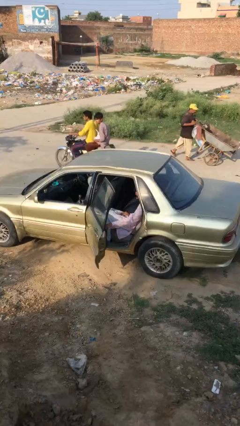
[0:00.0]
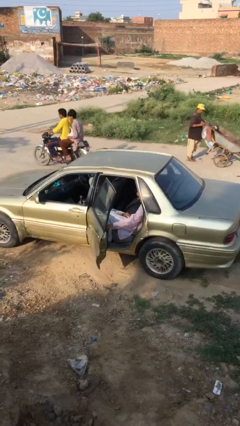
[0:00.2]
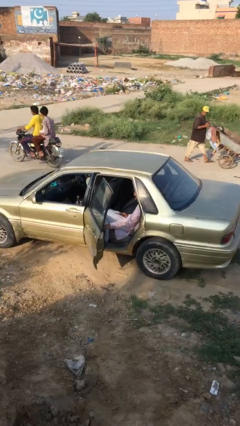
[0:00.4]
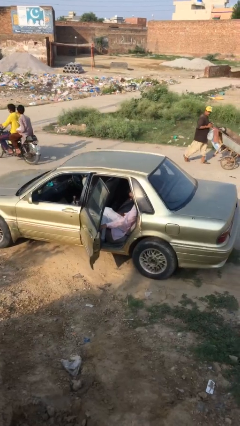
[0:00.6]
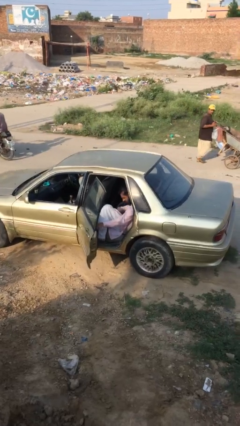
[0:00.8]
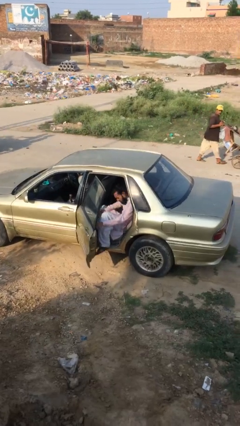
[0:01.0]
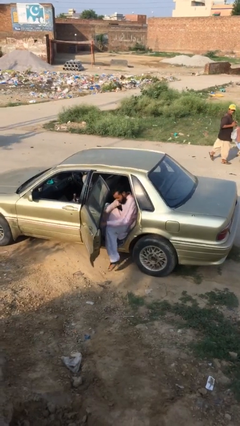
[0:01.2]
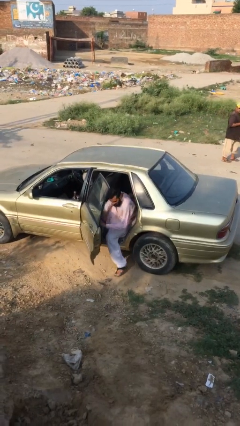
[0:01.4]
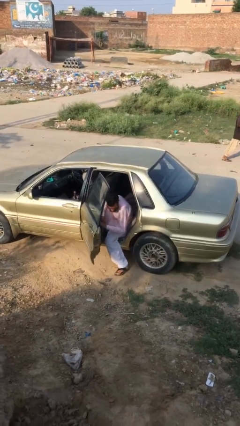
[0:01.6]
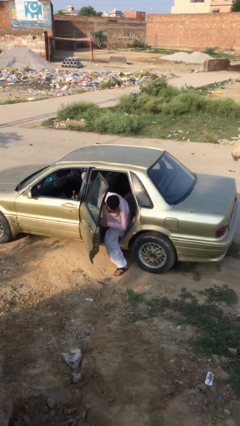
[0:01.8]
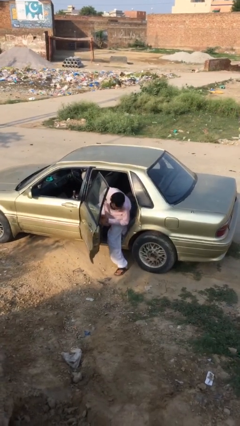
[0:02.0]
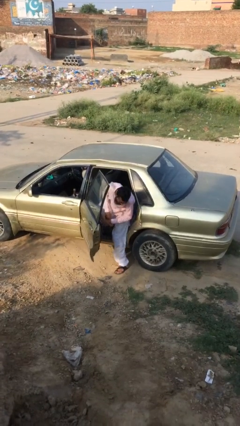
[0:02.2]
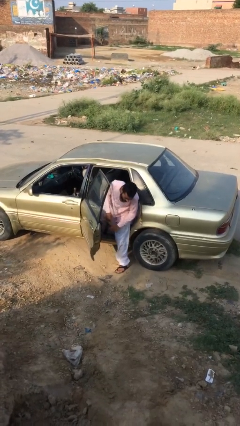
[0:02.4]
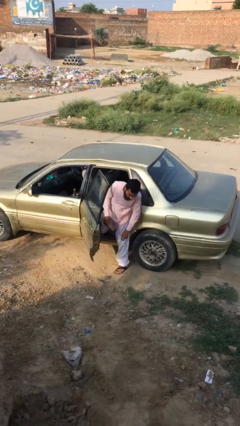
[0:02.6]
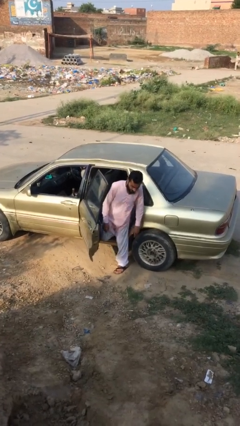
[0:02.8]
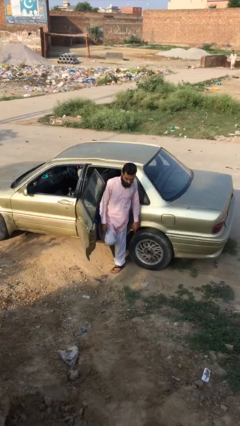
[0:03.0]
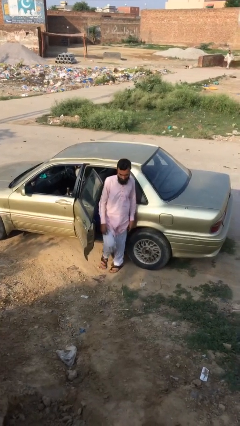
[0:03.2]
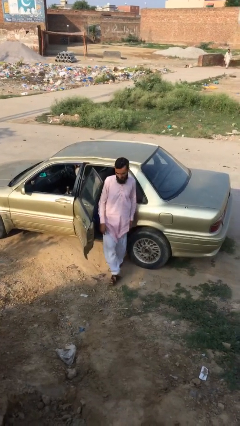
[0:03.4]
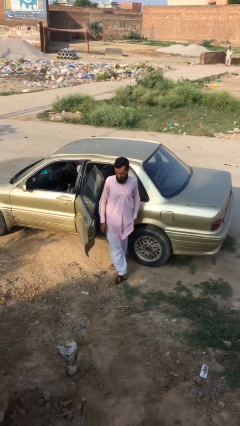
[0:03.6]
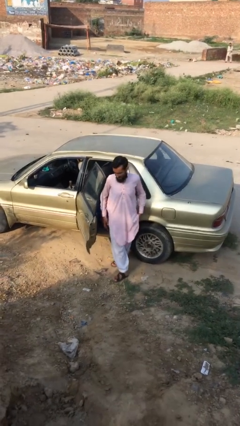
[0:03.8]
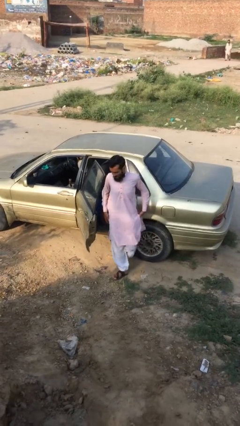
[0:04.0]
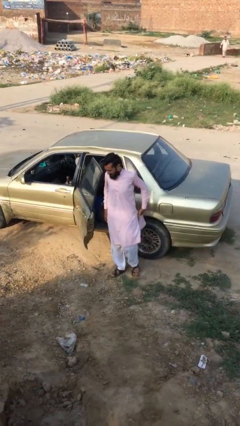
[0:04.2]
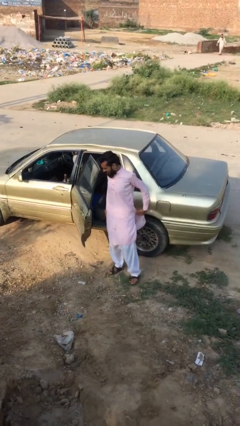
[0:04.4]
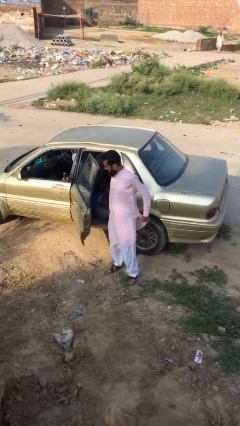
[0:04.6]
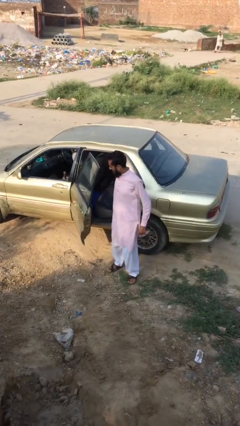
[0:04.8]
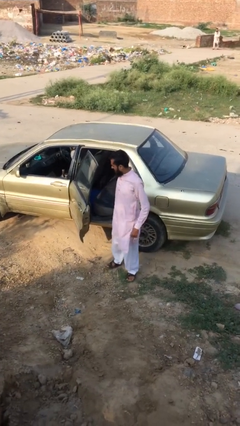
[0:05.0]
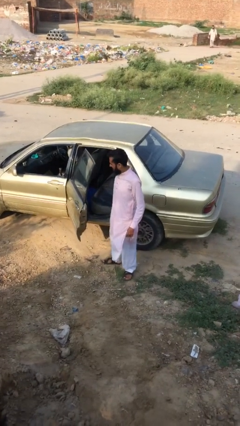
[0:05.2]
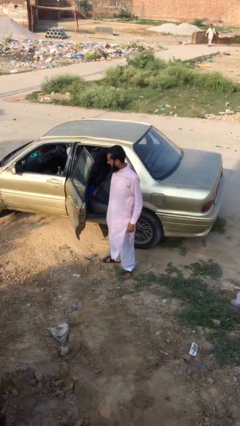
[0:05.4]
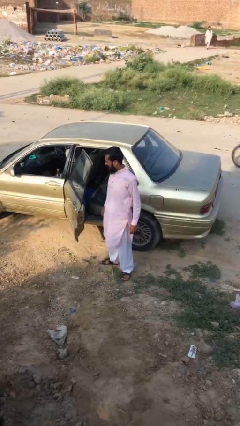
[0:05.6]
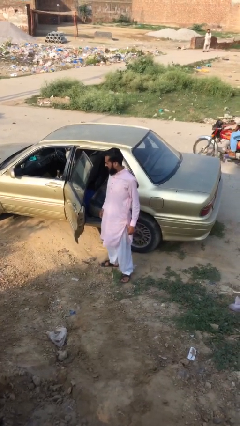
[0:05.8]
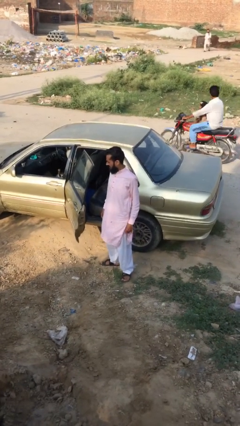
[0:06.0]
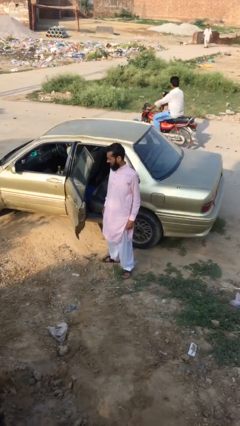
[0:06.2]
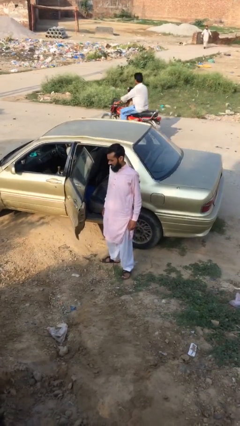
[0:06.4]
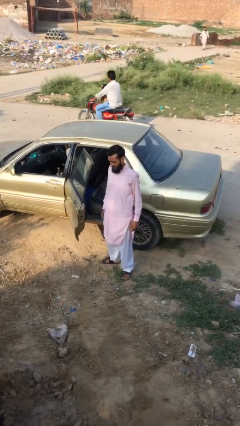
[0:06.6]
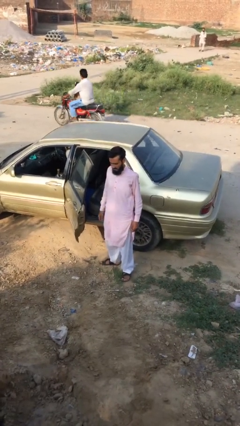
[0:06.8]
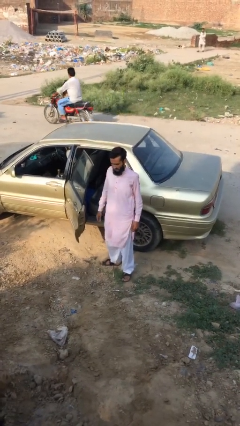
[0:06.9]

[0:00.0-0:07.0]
person exits car

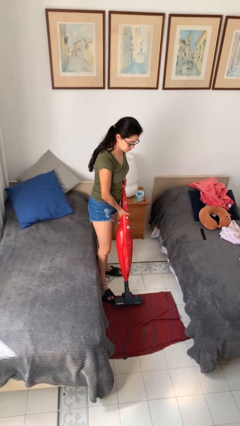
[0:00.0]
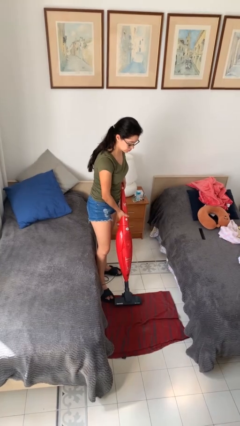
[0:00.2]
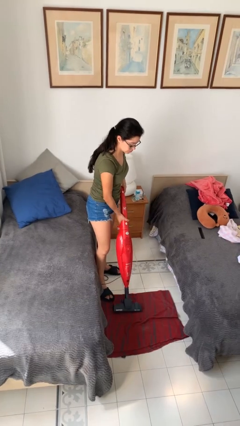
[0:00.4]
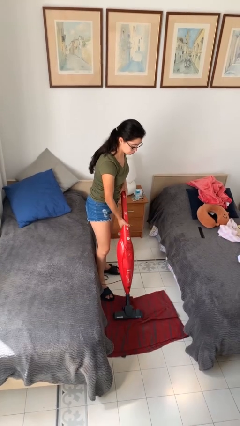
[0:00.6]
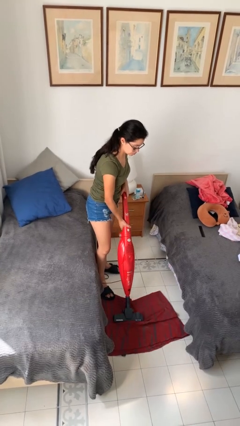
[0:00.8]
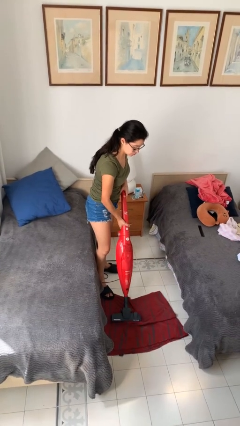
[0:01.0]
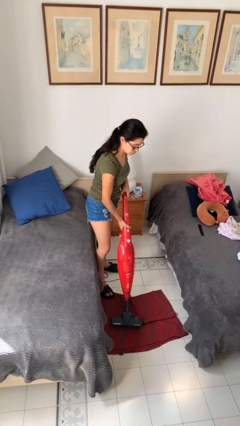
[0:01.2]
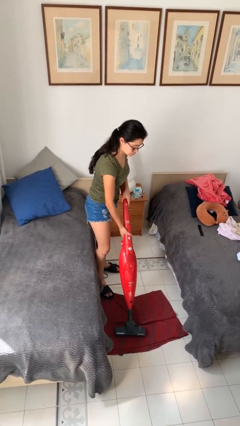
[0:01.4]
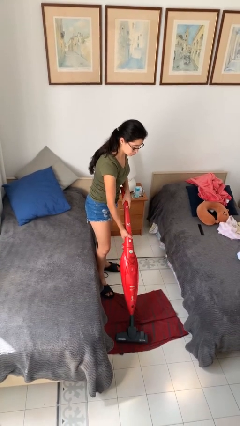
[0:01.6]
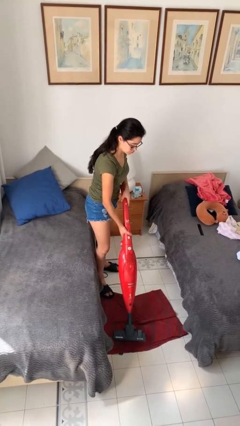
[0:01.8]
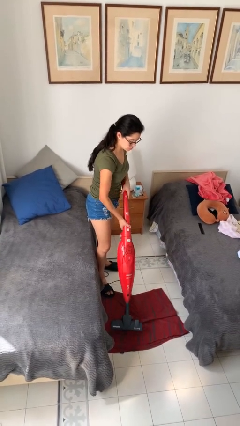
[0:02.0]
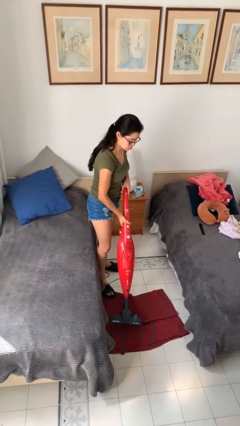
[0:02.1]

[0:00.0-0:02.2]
person vacuums carpet

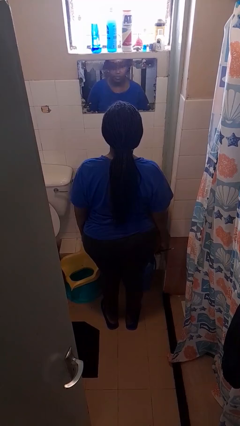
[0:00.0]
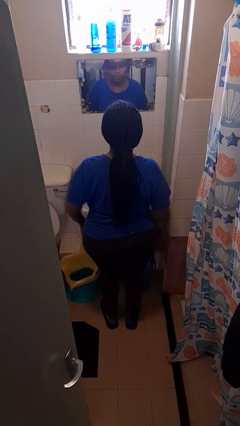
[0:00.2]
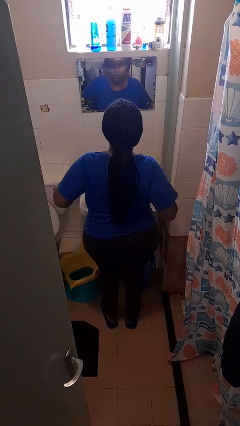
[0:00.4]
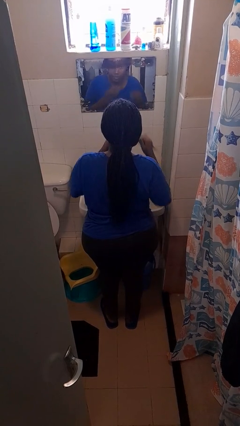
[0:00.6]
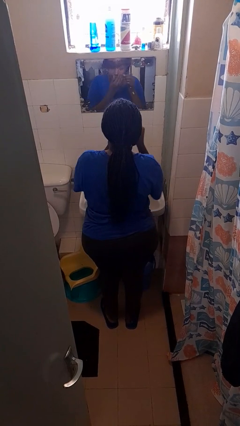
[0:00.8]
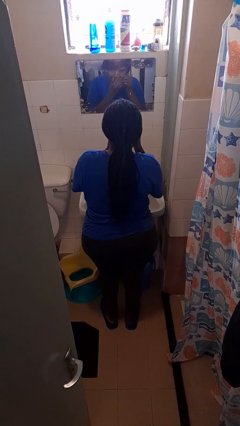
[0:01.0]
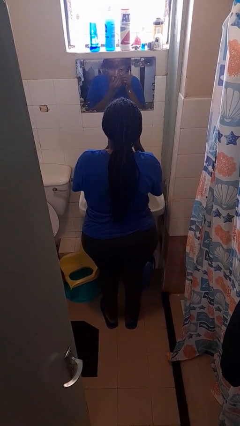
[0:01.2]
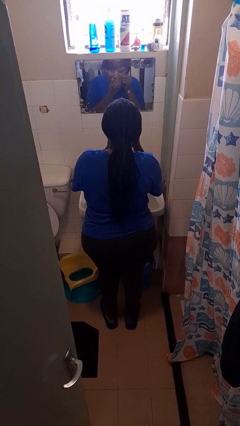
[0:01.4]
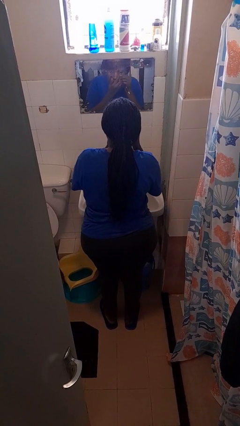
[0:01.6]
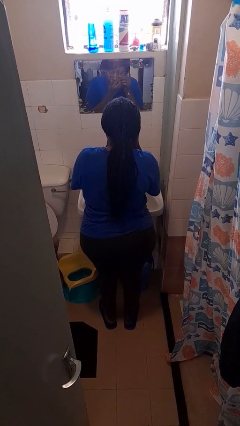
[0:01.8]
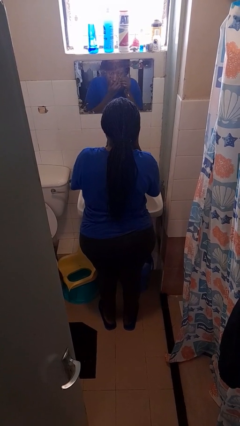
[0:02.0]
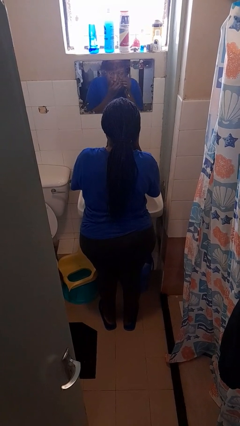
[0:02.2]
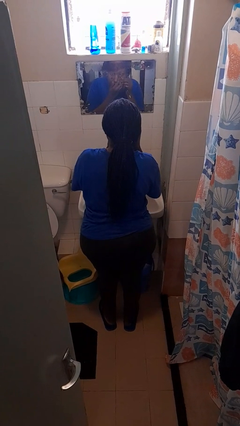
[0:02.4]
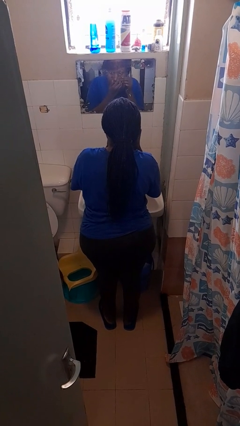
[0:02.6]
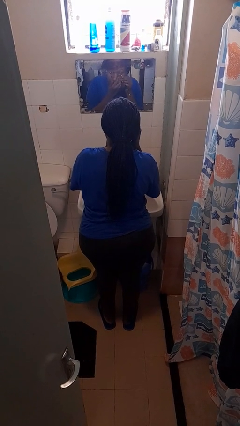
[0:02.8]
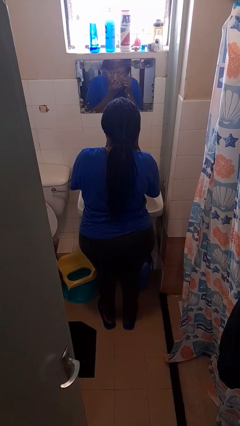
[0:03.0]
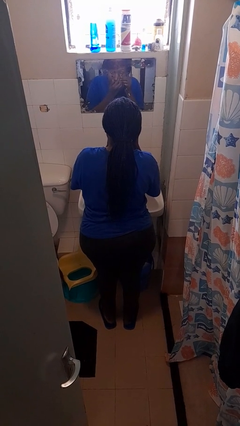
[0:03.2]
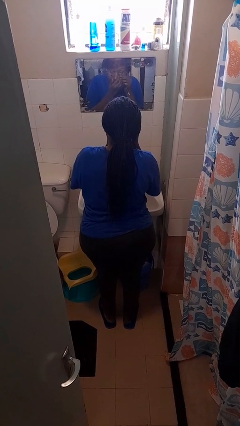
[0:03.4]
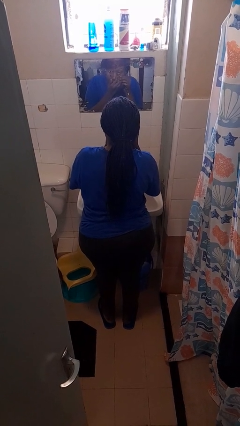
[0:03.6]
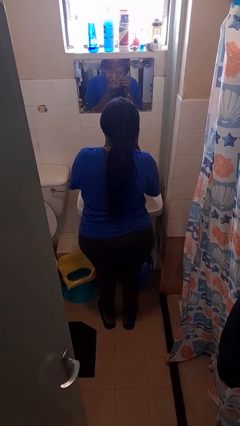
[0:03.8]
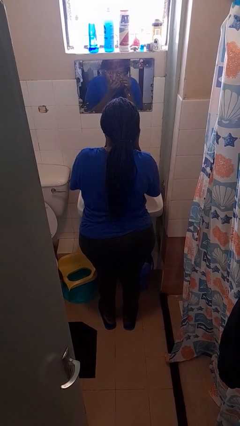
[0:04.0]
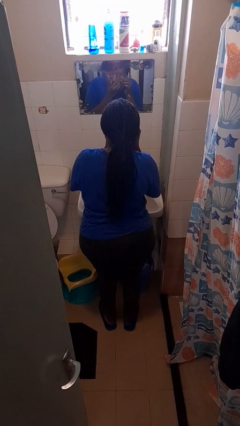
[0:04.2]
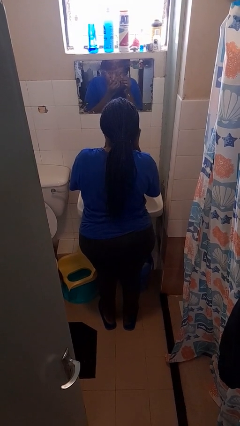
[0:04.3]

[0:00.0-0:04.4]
person applies eye makeup

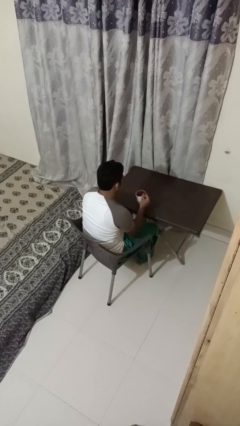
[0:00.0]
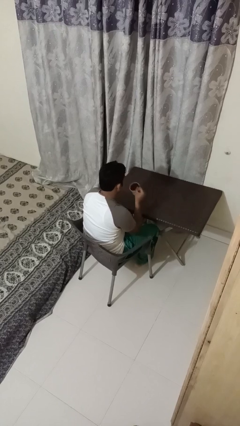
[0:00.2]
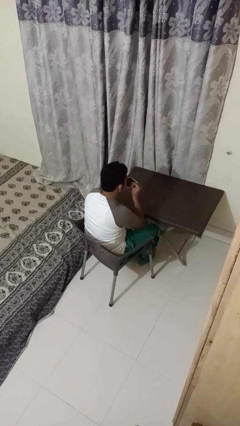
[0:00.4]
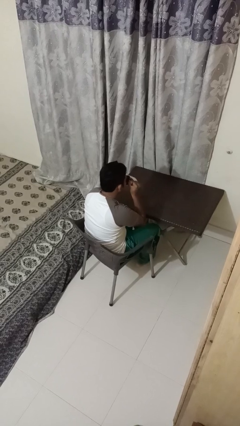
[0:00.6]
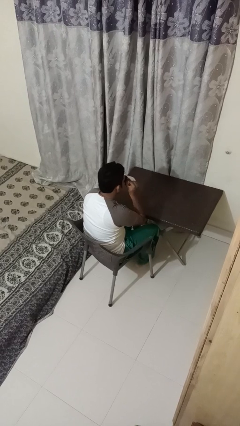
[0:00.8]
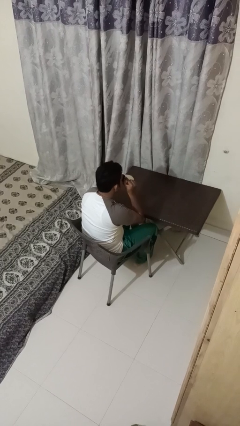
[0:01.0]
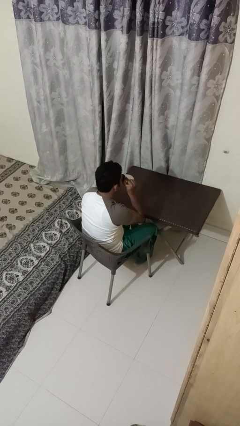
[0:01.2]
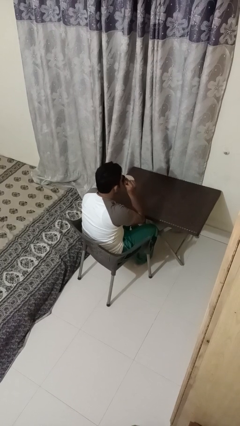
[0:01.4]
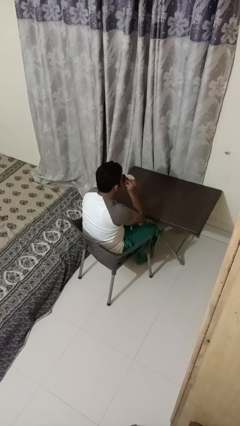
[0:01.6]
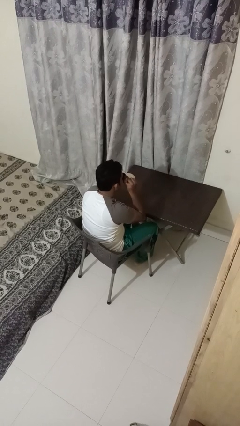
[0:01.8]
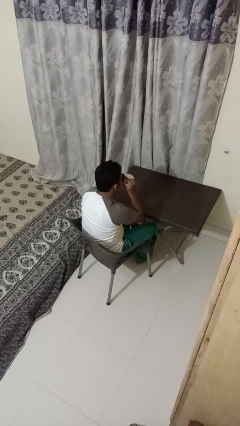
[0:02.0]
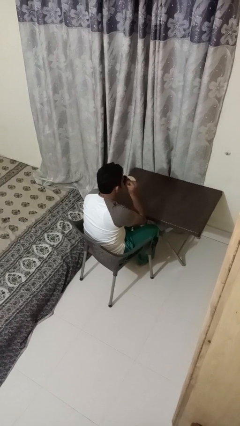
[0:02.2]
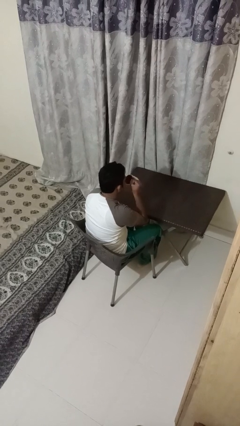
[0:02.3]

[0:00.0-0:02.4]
person drinks from mug

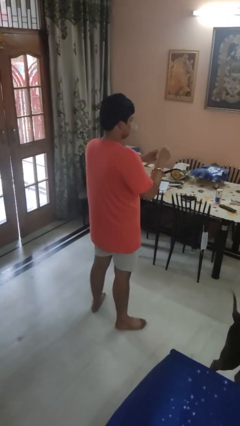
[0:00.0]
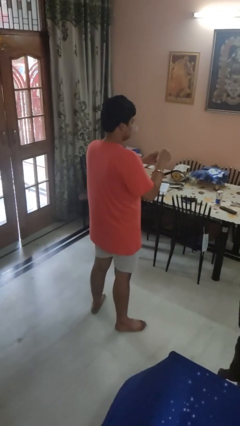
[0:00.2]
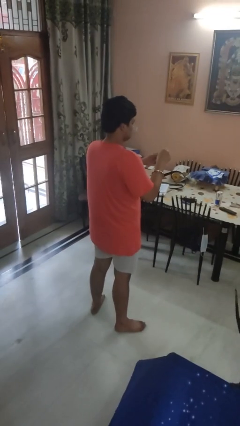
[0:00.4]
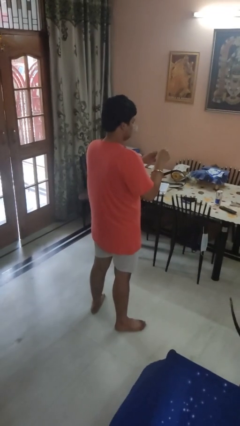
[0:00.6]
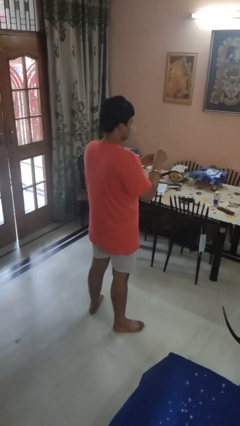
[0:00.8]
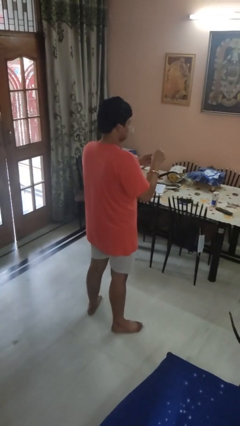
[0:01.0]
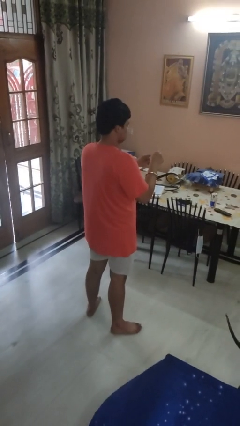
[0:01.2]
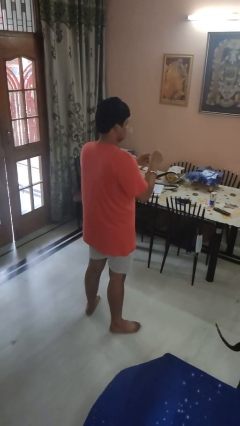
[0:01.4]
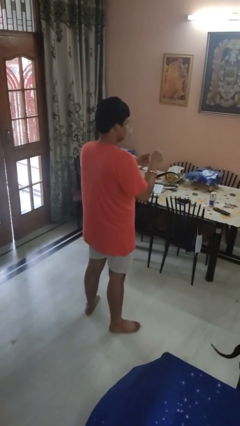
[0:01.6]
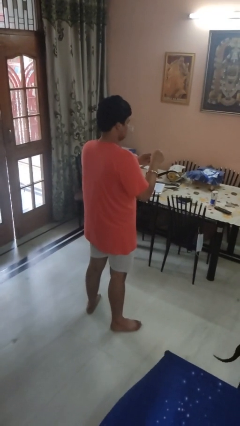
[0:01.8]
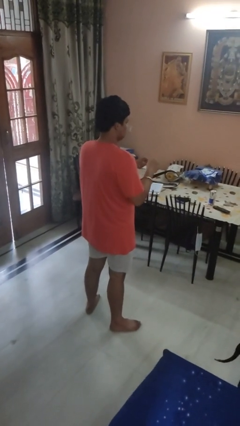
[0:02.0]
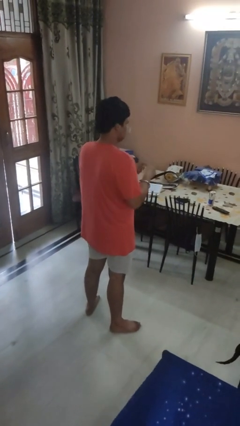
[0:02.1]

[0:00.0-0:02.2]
person files fingernails
